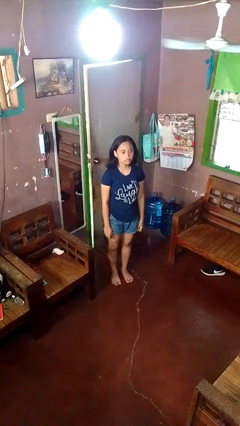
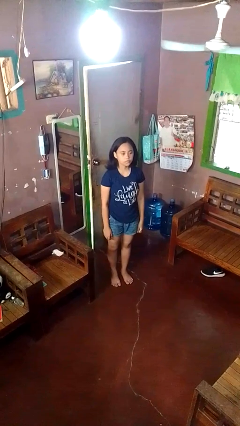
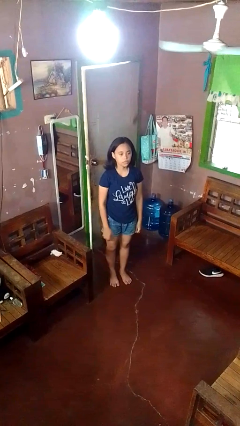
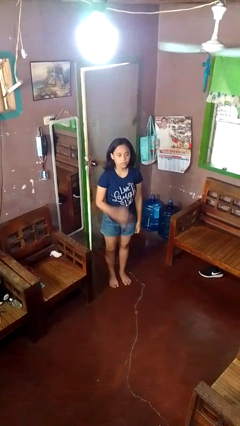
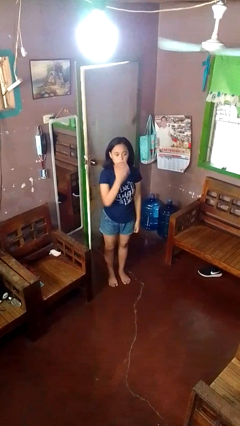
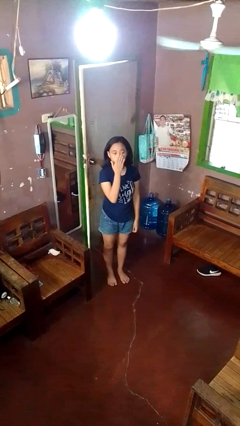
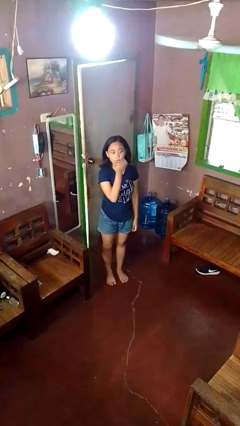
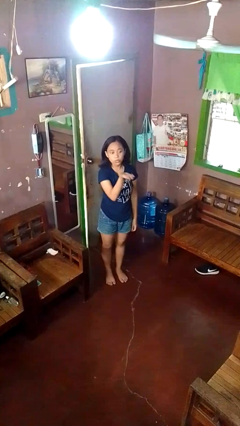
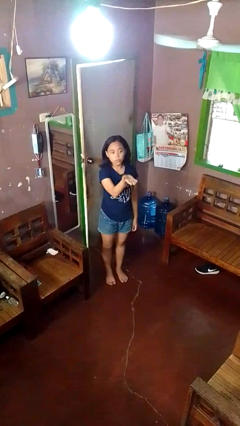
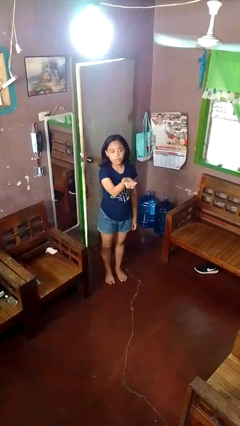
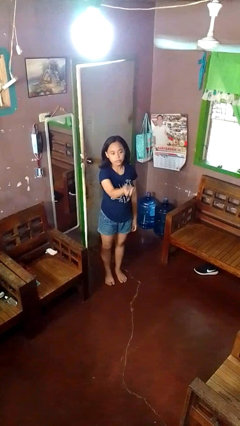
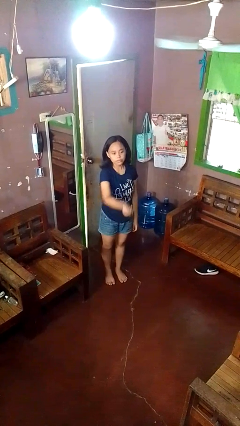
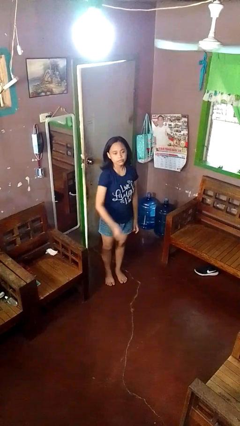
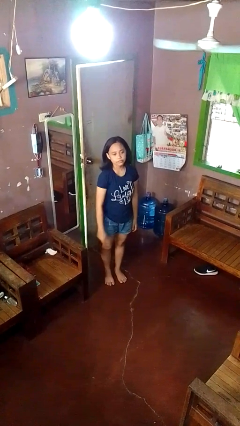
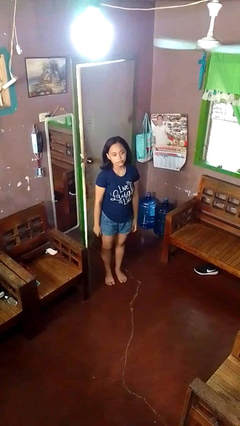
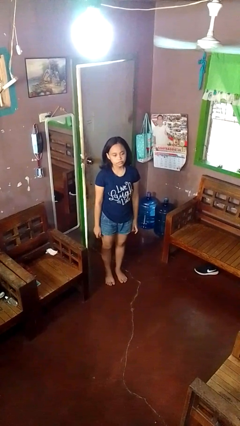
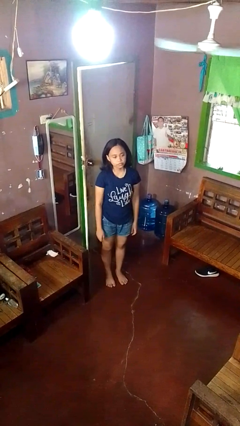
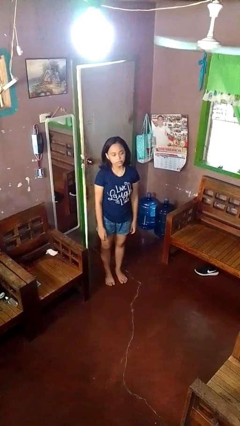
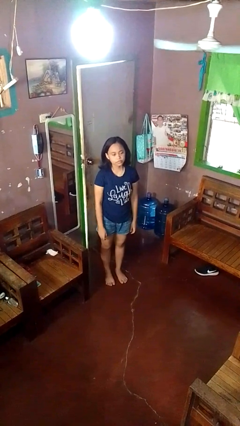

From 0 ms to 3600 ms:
person gestures blow kiss

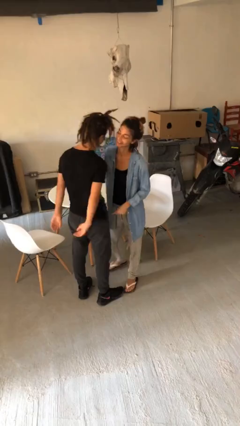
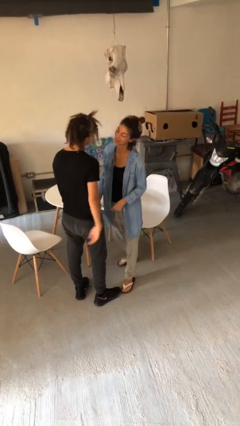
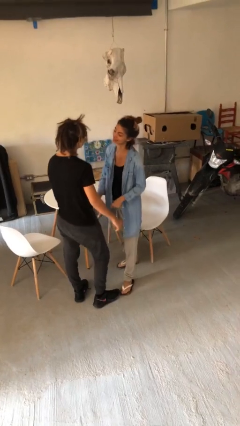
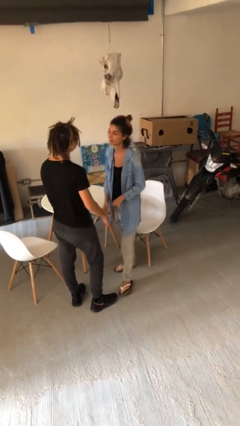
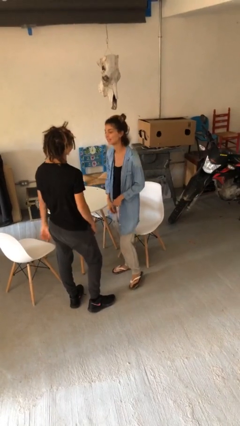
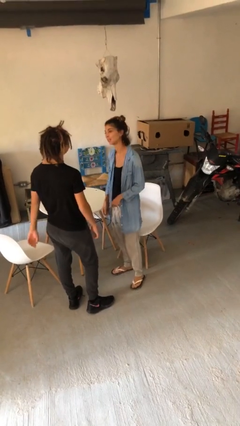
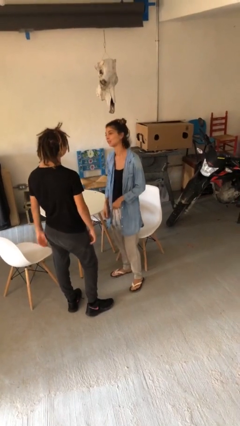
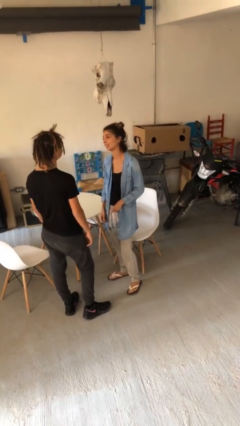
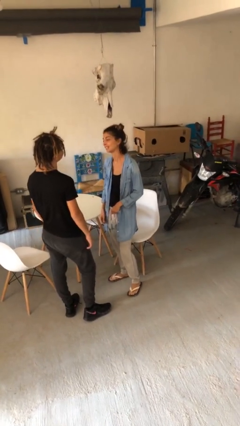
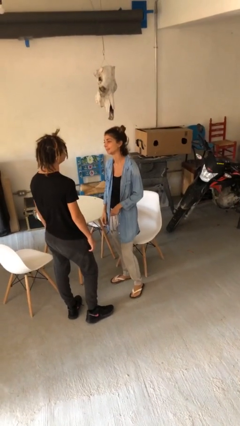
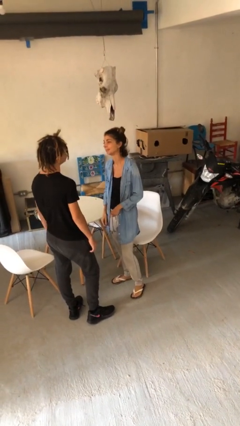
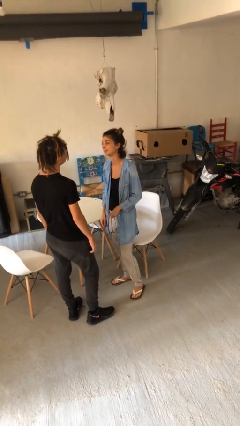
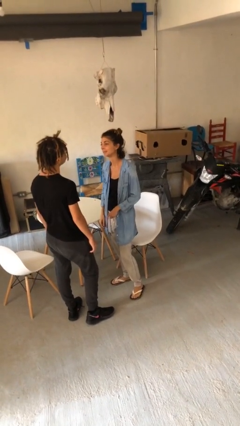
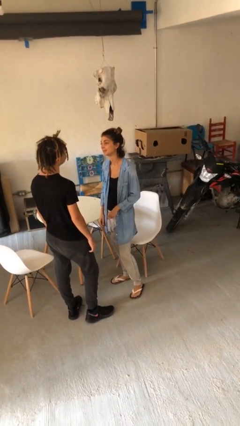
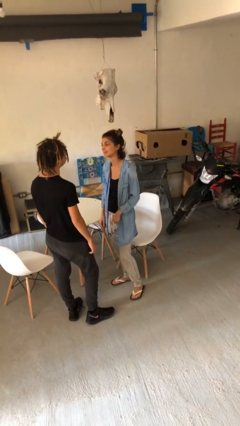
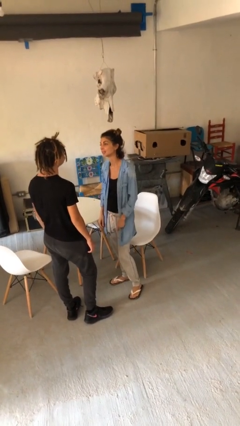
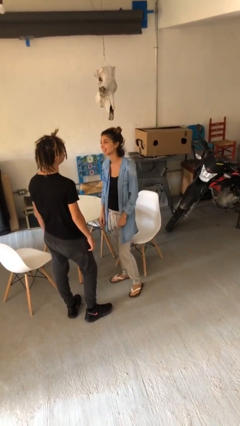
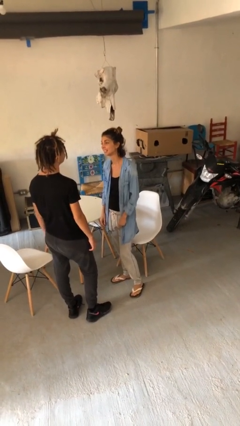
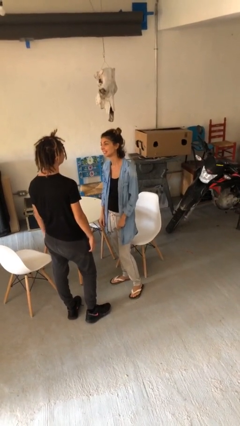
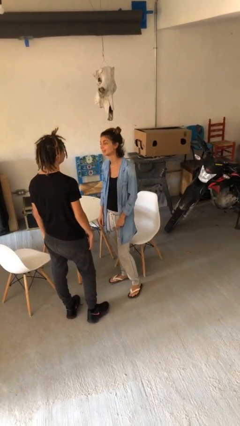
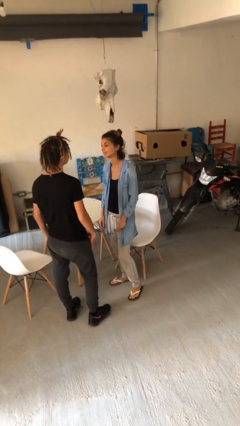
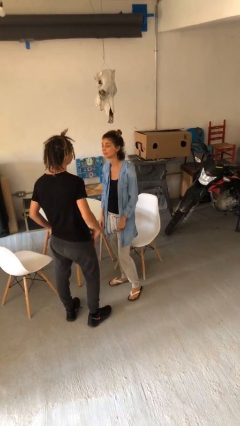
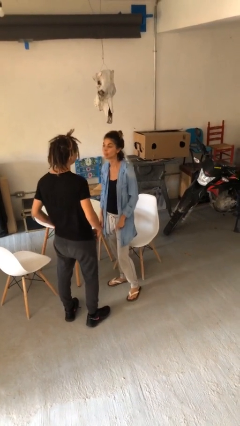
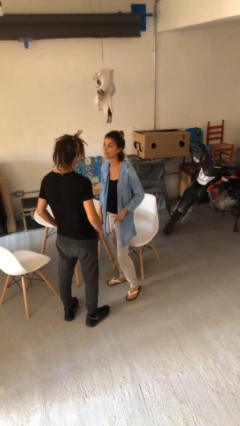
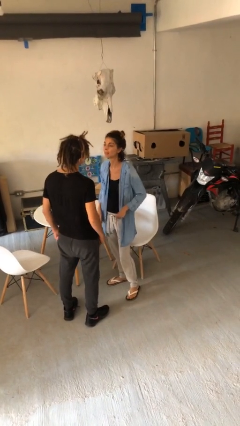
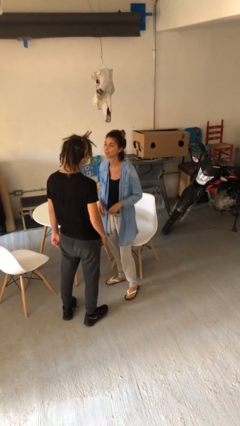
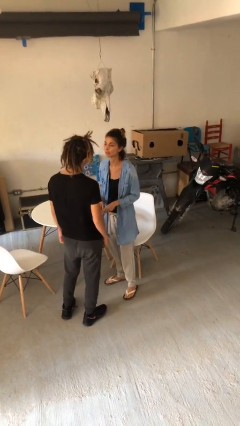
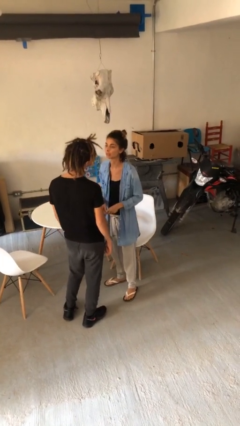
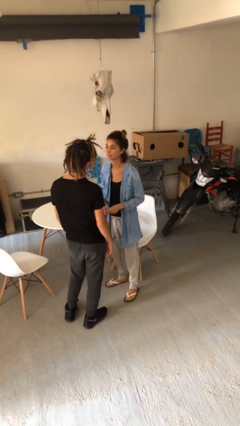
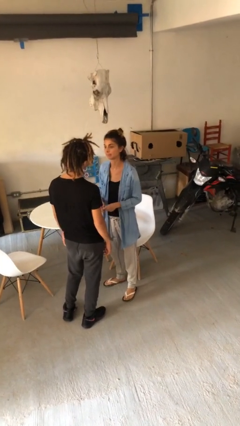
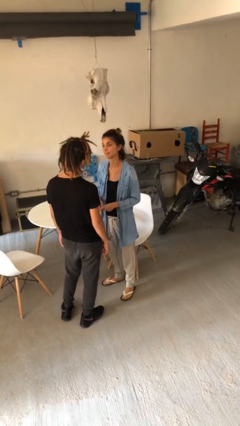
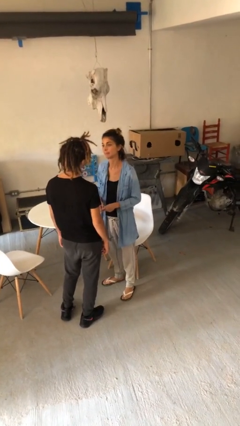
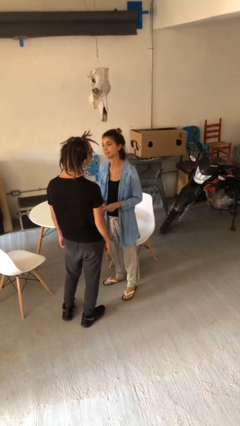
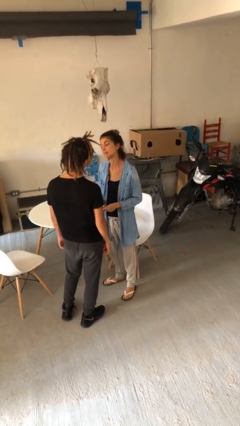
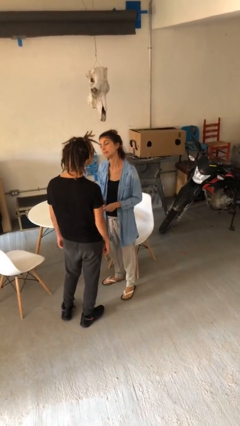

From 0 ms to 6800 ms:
person talks to person

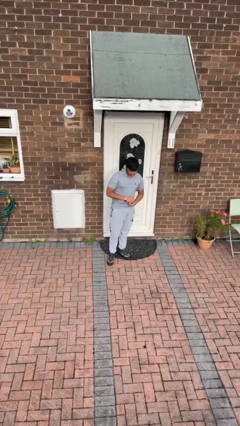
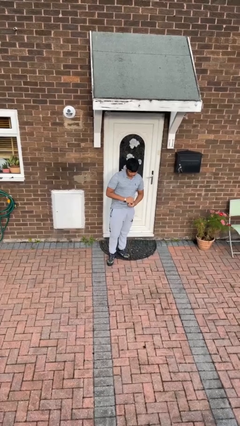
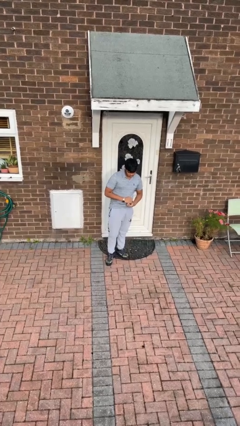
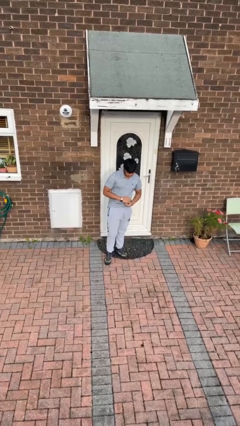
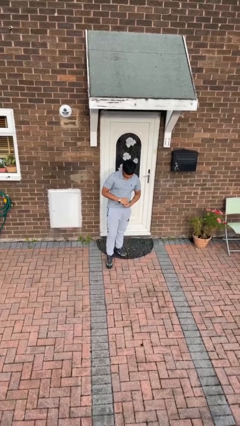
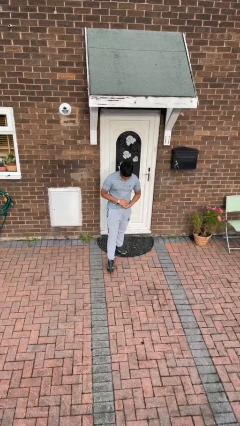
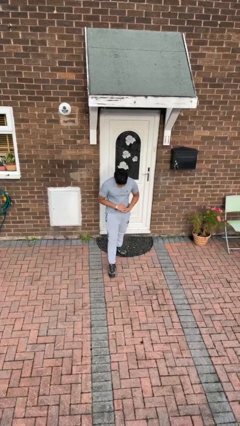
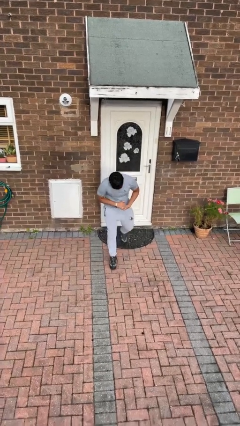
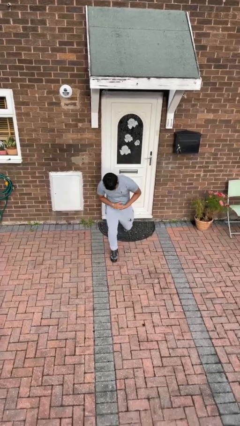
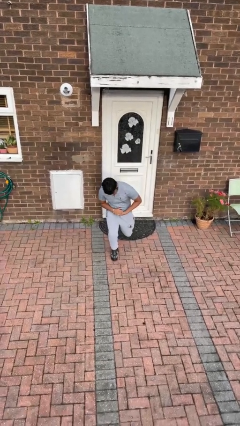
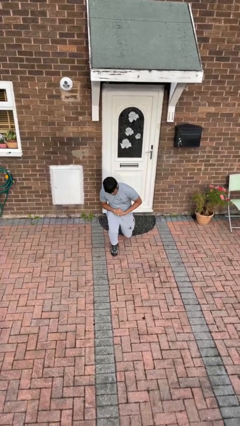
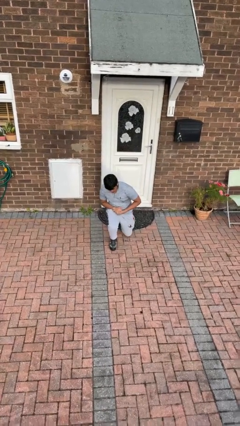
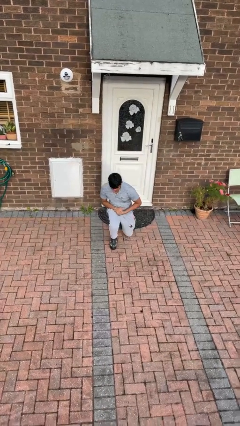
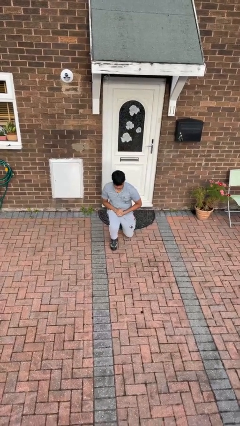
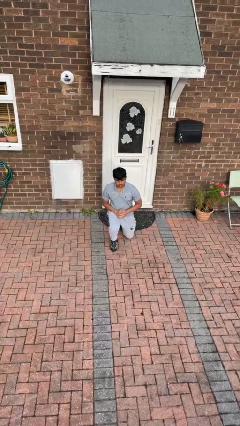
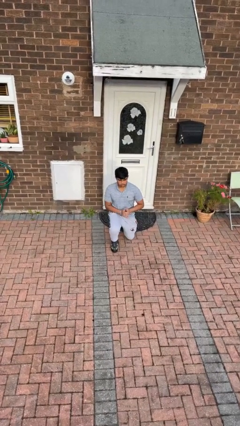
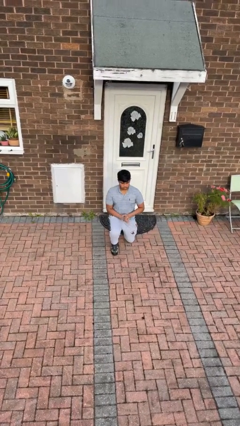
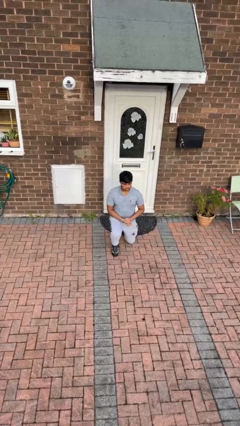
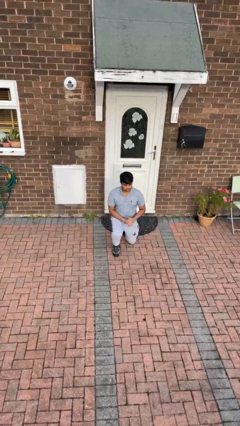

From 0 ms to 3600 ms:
person kneels

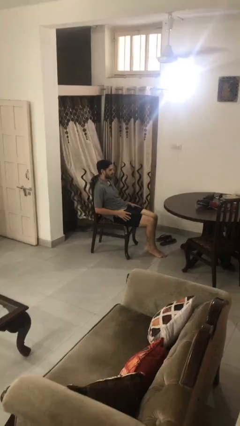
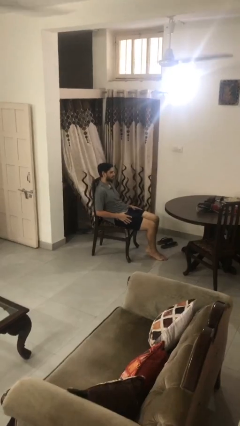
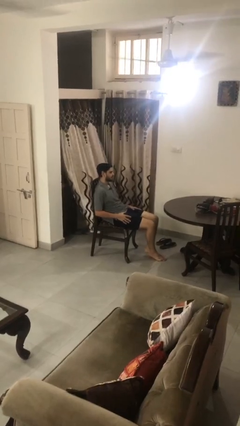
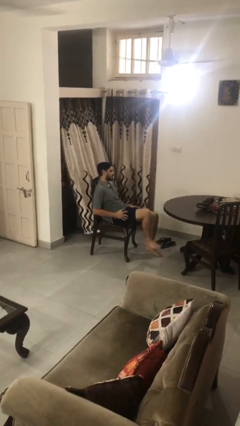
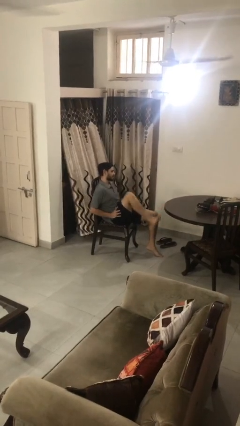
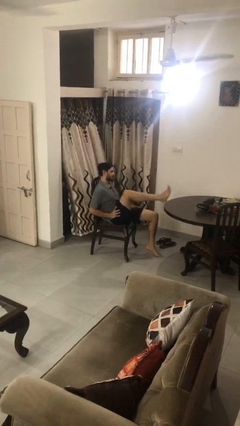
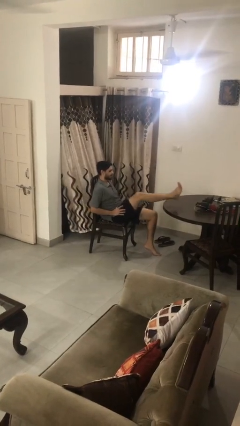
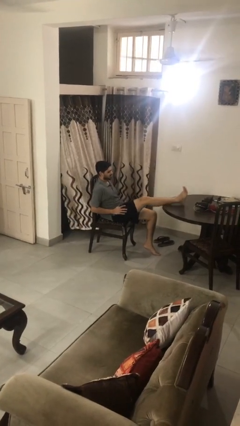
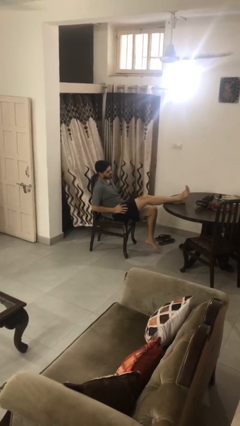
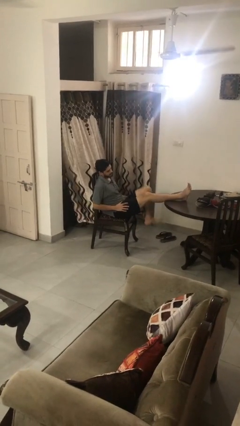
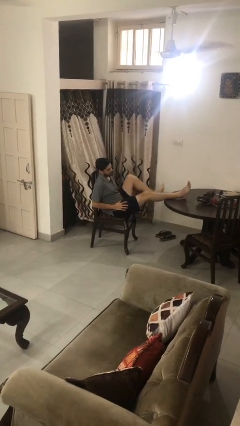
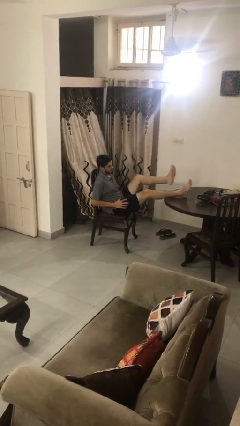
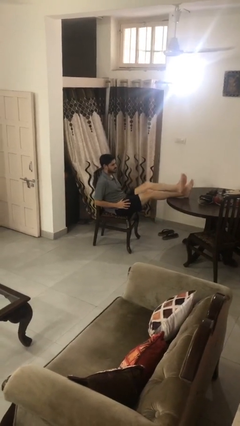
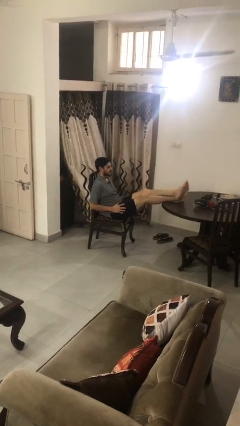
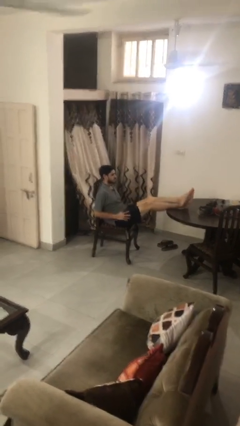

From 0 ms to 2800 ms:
person puts feet up

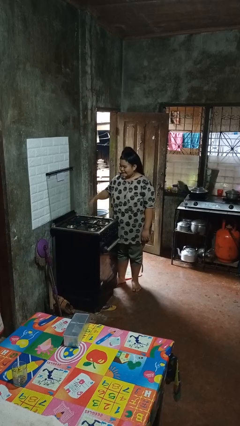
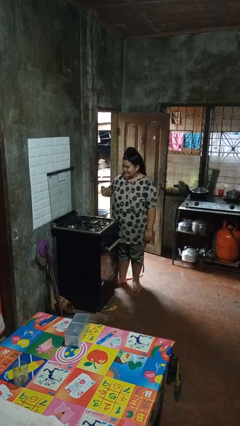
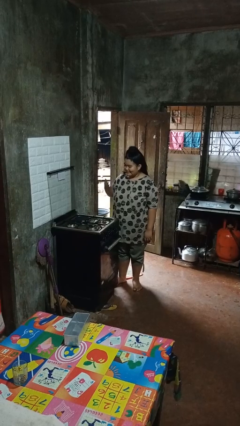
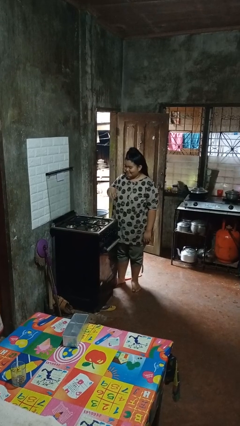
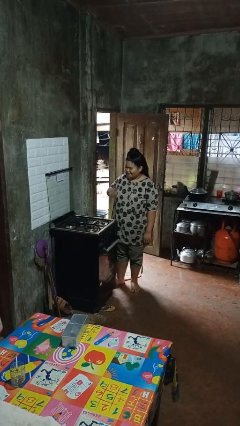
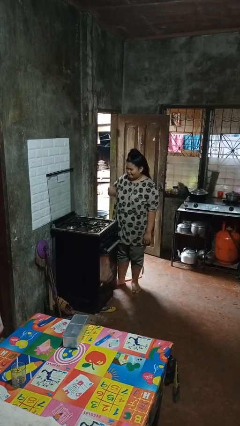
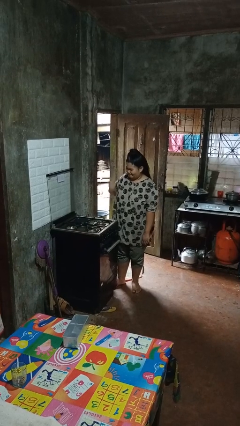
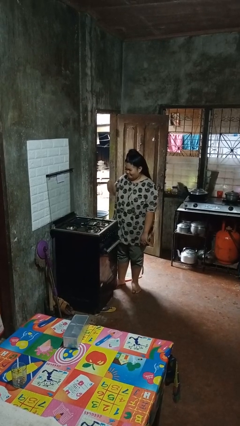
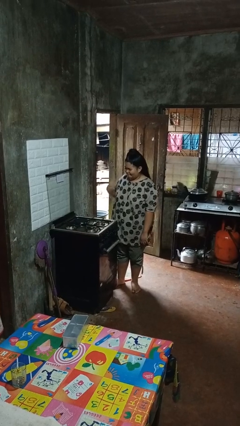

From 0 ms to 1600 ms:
person burns hand
